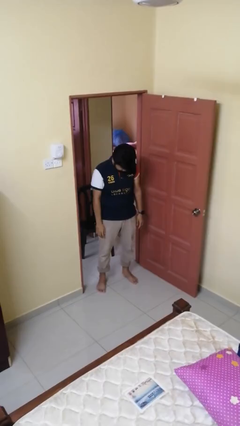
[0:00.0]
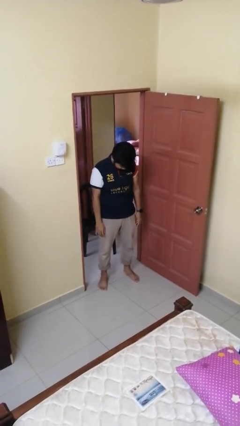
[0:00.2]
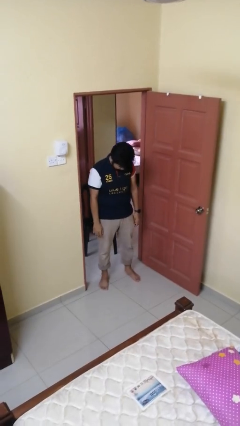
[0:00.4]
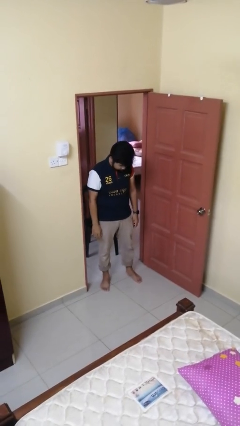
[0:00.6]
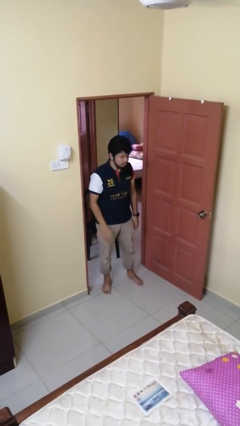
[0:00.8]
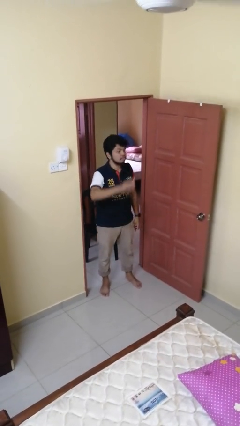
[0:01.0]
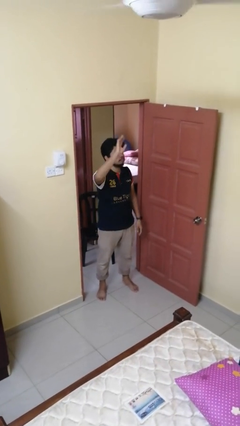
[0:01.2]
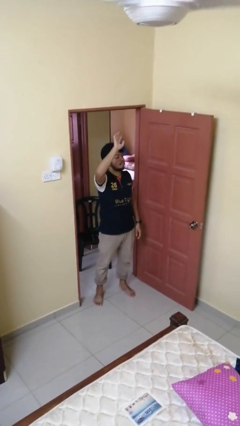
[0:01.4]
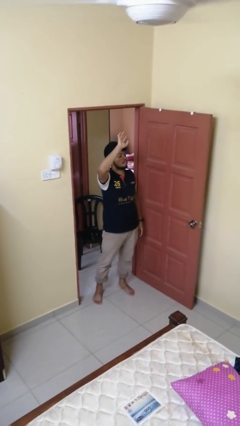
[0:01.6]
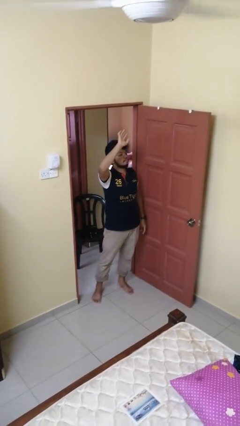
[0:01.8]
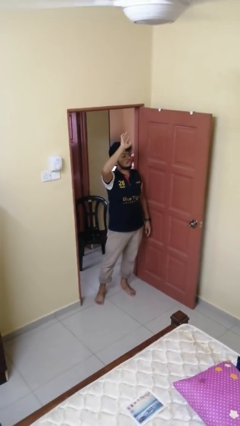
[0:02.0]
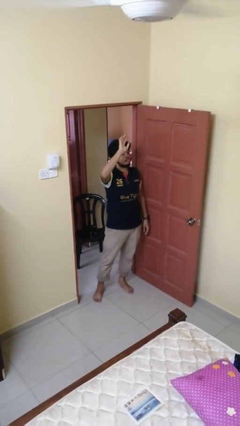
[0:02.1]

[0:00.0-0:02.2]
person gestures raise hand

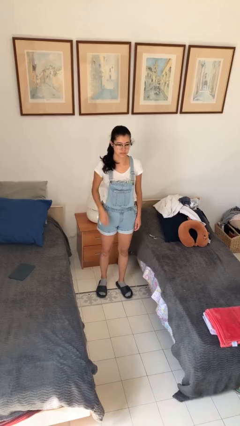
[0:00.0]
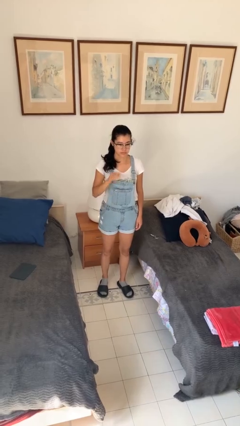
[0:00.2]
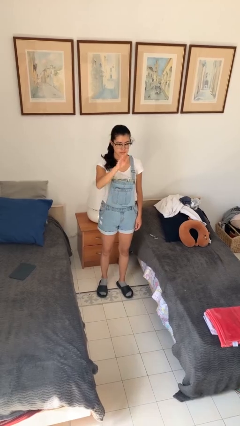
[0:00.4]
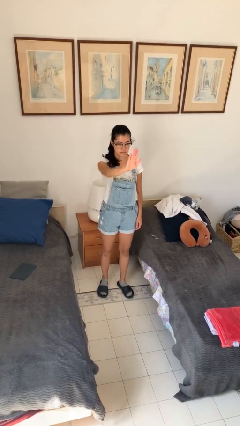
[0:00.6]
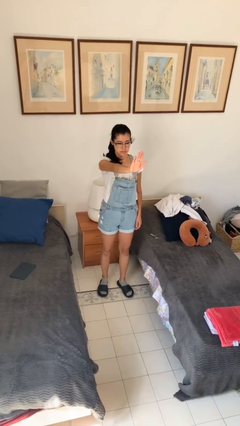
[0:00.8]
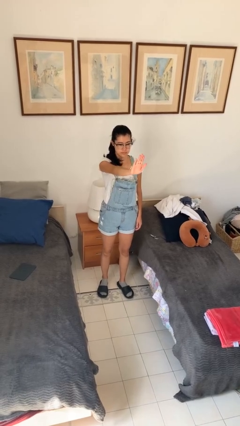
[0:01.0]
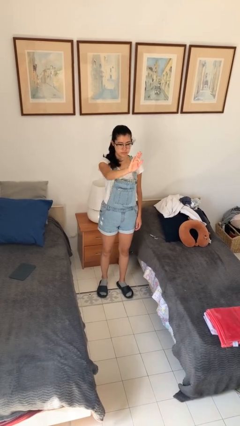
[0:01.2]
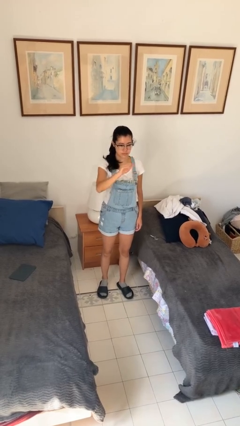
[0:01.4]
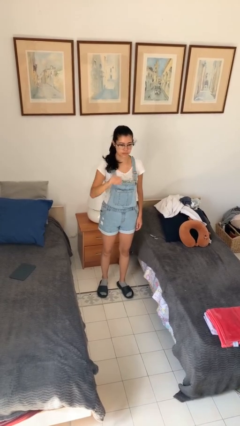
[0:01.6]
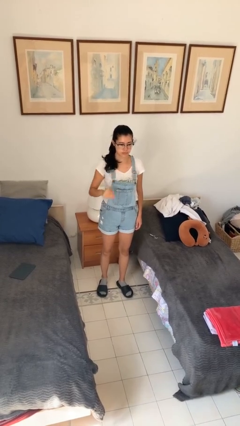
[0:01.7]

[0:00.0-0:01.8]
person gestures stop

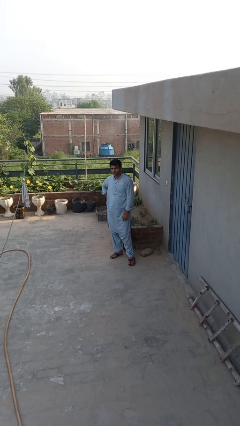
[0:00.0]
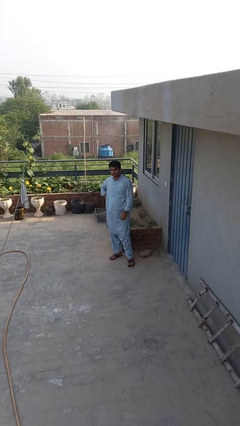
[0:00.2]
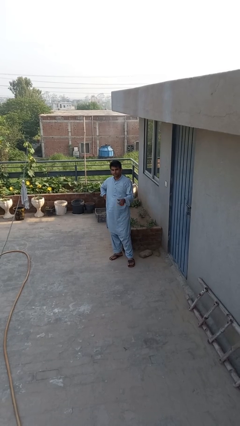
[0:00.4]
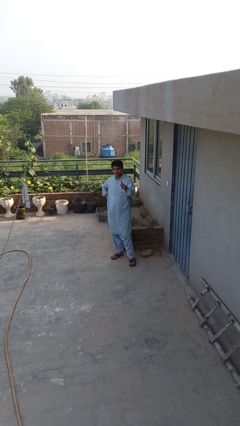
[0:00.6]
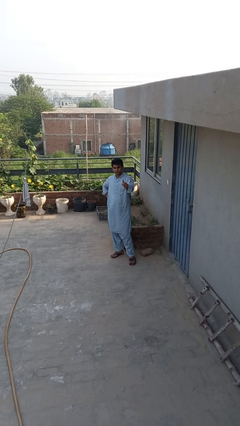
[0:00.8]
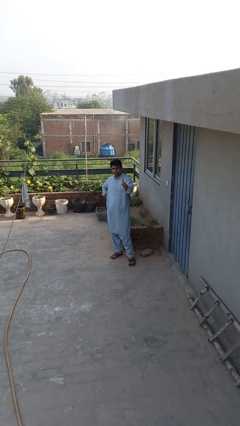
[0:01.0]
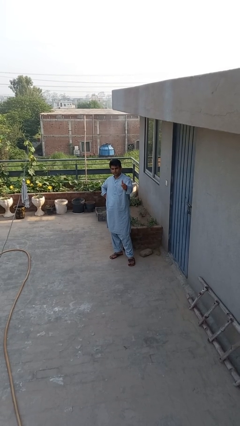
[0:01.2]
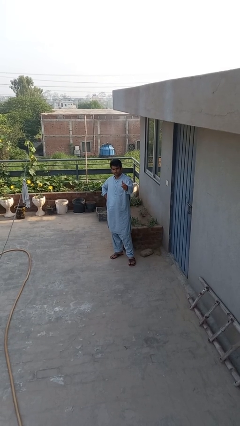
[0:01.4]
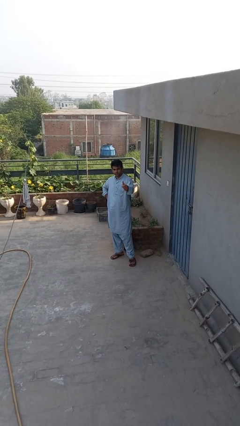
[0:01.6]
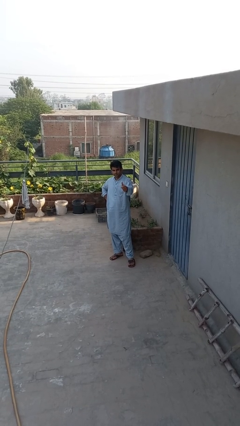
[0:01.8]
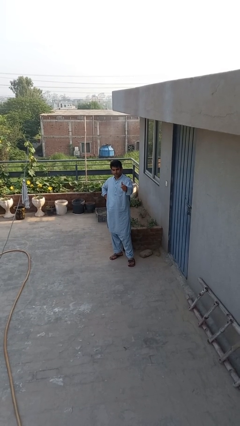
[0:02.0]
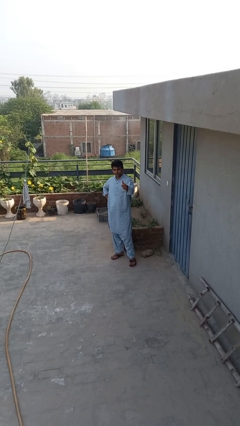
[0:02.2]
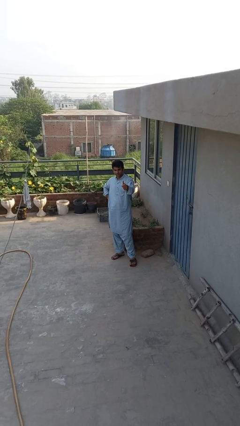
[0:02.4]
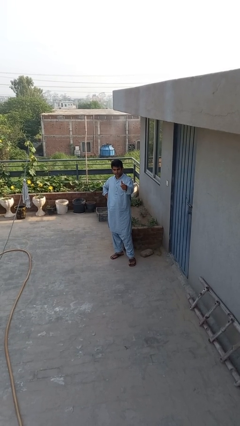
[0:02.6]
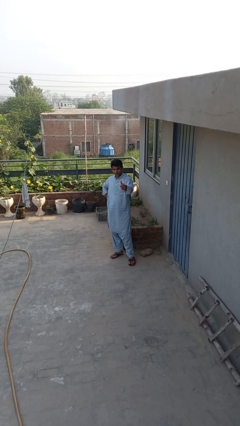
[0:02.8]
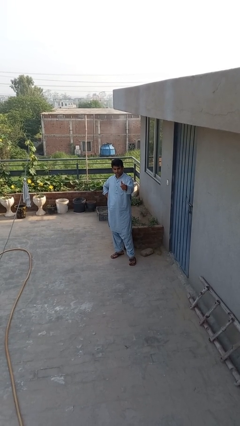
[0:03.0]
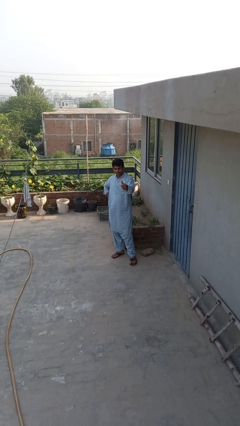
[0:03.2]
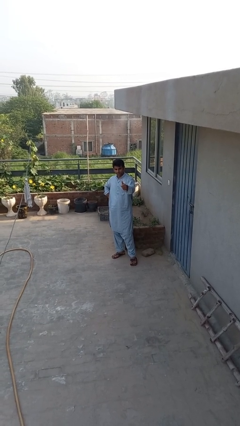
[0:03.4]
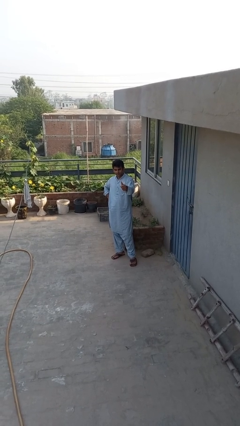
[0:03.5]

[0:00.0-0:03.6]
person gestures thumbs up

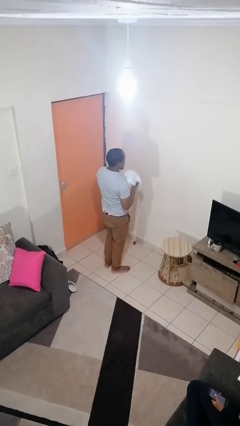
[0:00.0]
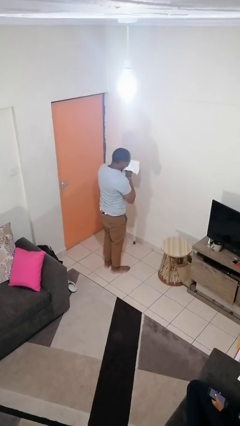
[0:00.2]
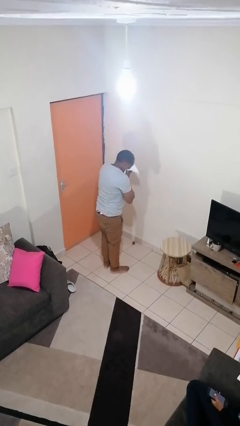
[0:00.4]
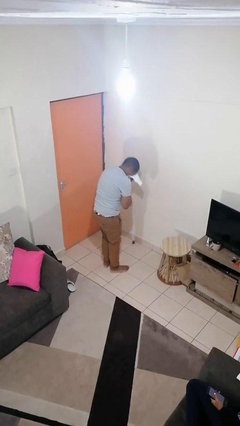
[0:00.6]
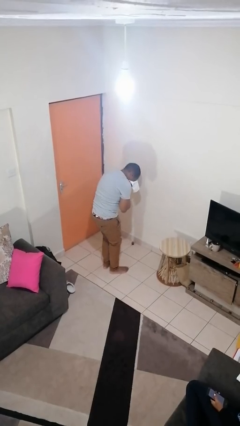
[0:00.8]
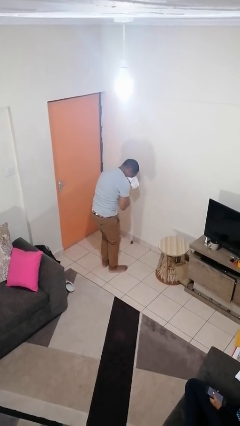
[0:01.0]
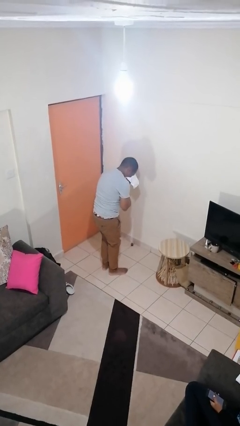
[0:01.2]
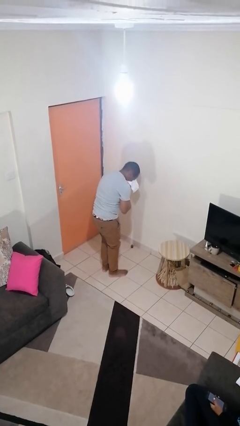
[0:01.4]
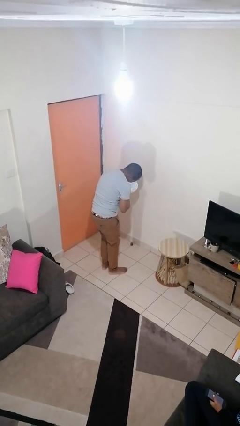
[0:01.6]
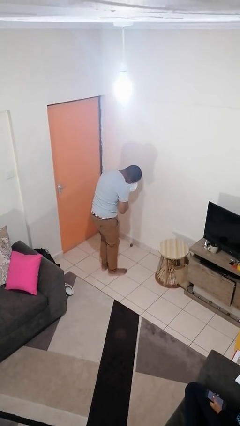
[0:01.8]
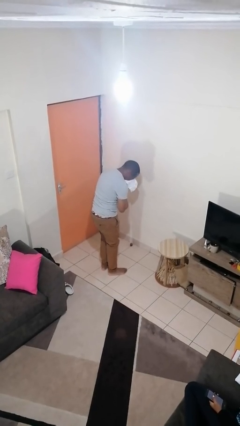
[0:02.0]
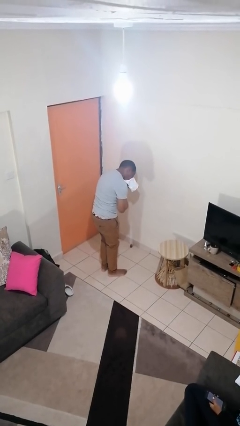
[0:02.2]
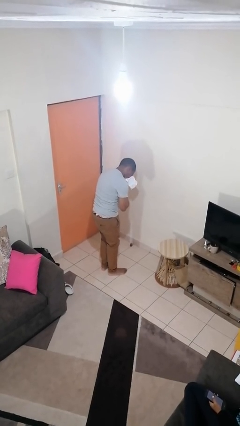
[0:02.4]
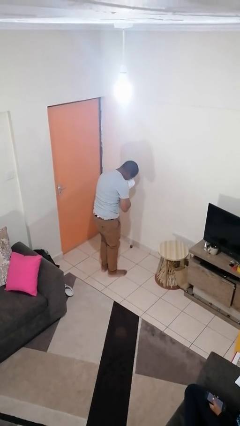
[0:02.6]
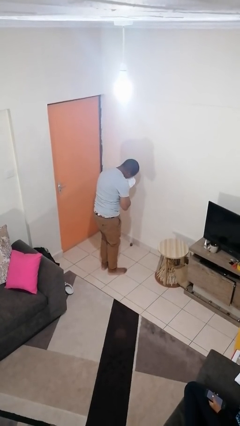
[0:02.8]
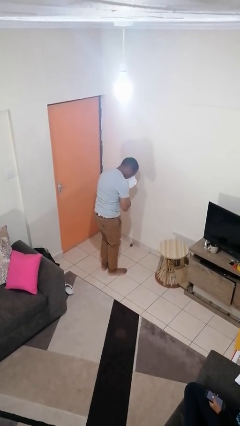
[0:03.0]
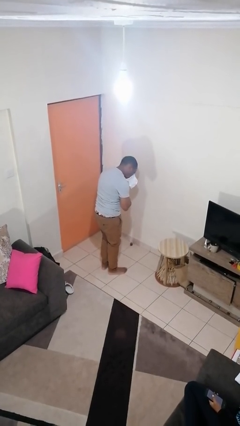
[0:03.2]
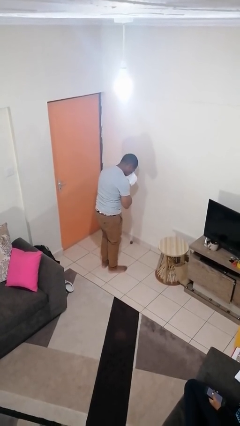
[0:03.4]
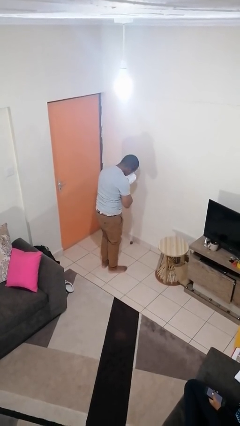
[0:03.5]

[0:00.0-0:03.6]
person blows nose

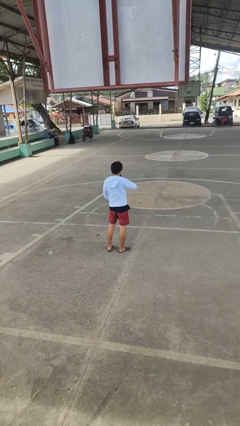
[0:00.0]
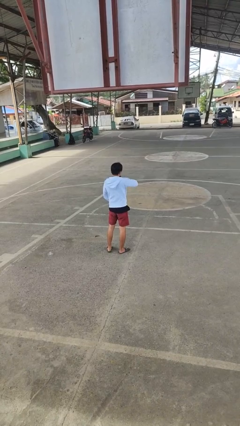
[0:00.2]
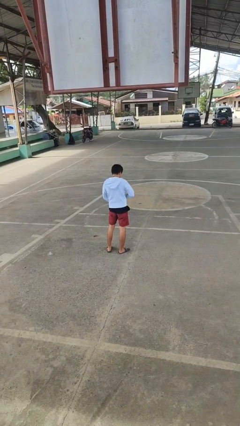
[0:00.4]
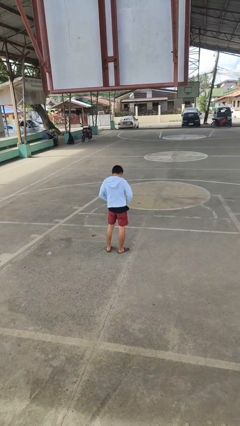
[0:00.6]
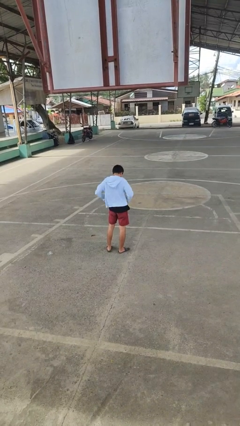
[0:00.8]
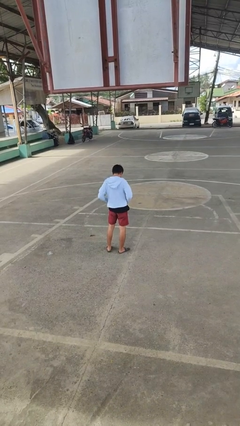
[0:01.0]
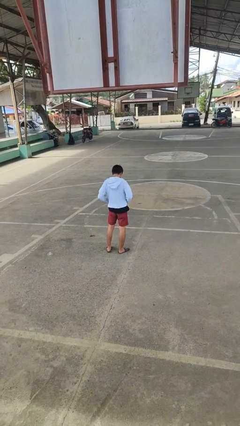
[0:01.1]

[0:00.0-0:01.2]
person unzips jacket

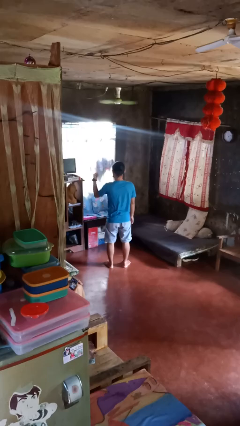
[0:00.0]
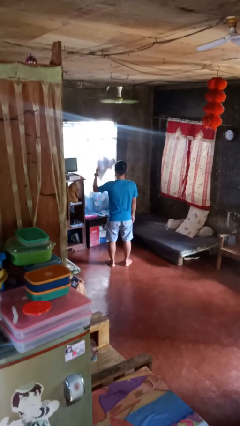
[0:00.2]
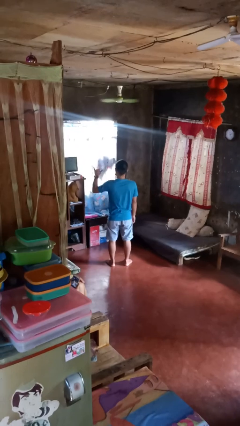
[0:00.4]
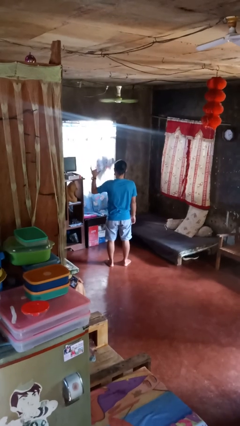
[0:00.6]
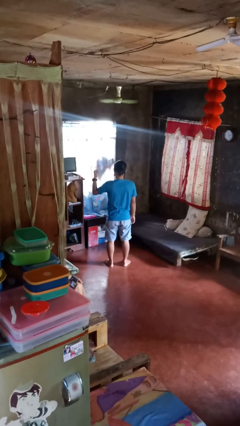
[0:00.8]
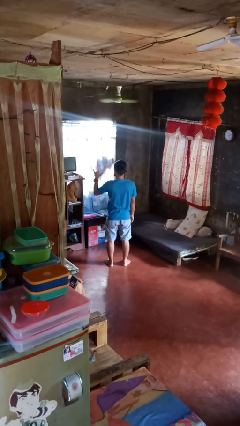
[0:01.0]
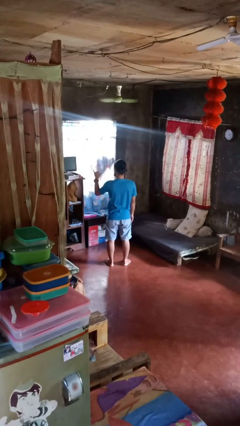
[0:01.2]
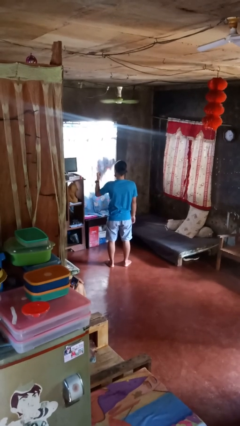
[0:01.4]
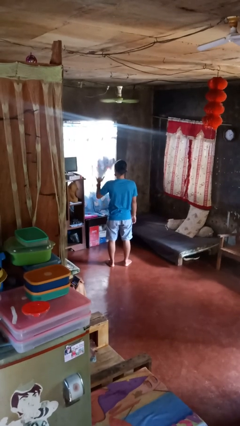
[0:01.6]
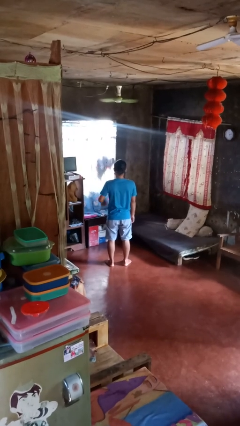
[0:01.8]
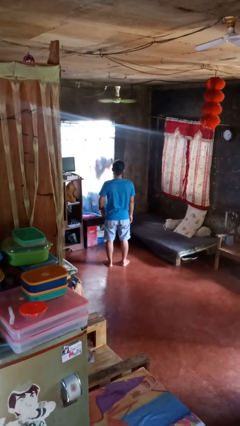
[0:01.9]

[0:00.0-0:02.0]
person gestures hang loose

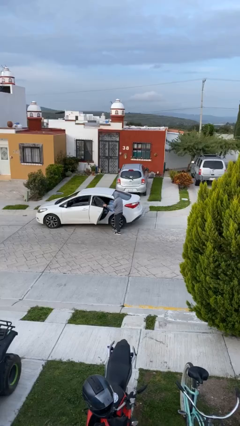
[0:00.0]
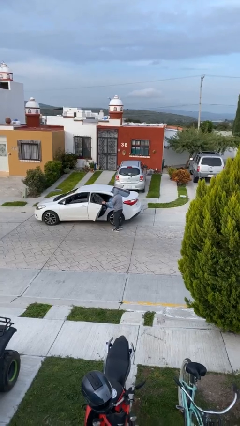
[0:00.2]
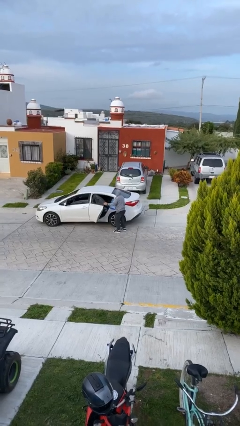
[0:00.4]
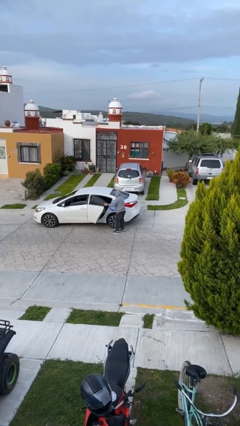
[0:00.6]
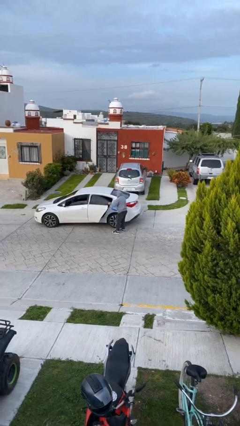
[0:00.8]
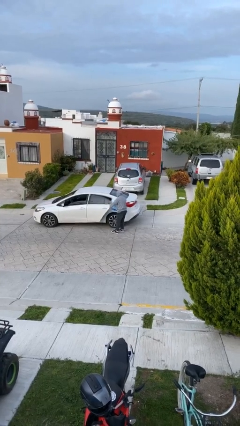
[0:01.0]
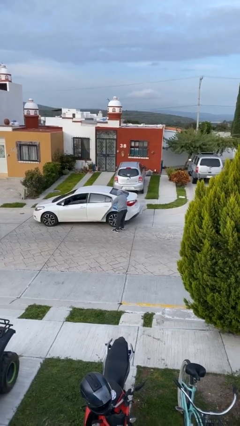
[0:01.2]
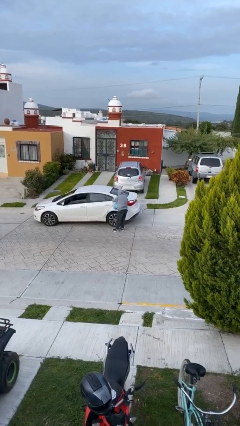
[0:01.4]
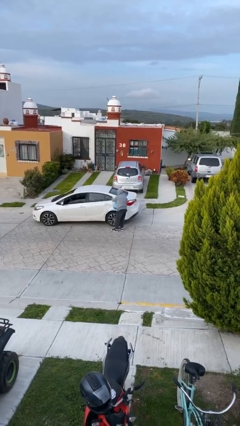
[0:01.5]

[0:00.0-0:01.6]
person closes car door

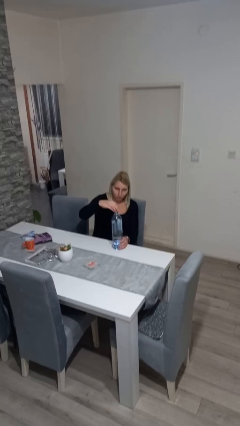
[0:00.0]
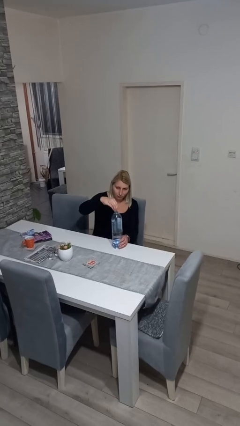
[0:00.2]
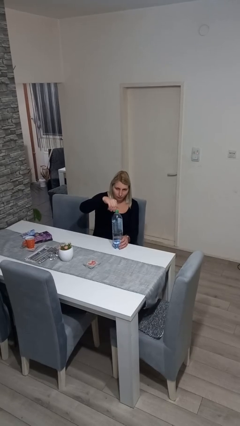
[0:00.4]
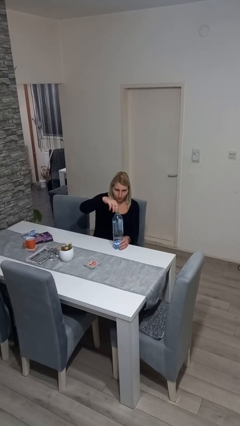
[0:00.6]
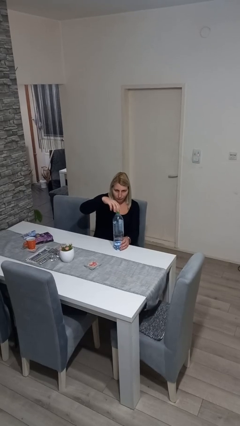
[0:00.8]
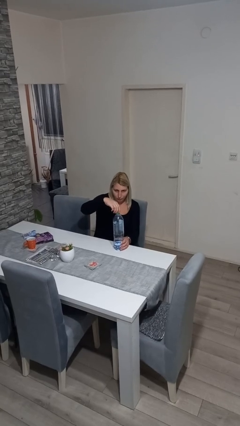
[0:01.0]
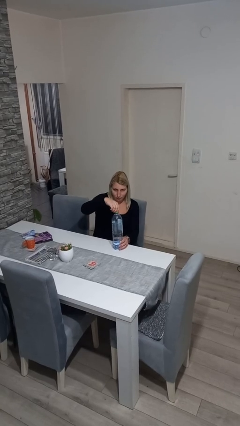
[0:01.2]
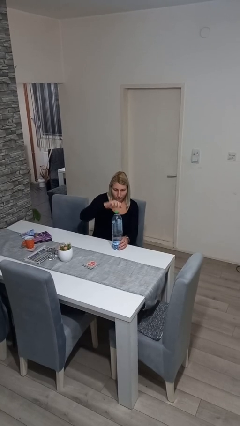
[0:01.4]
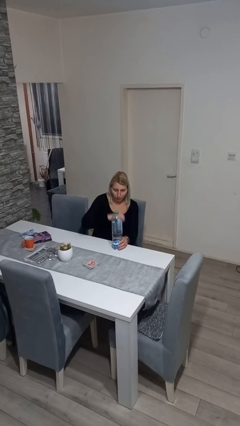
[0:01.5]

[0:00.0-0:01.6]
person screws lid to bottle
